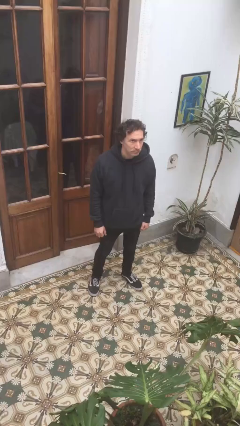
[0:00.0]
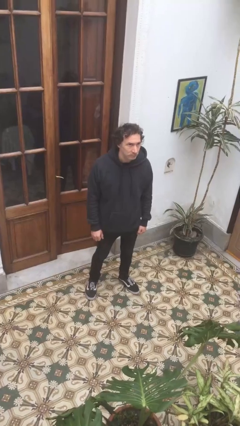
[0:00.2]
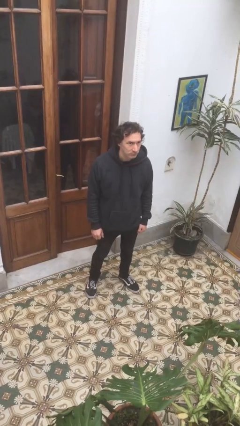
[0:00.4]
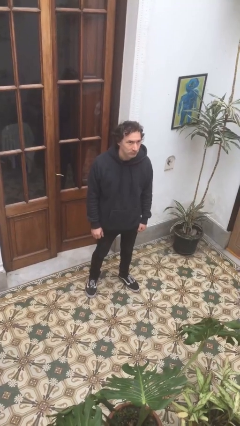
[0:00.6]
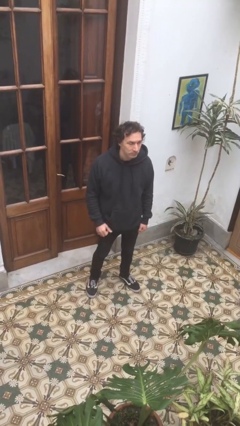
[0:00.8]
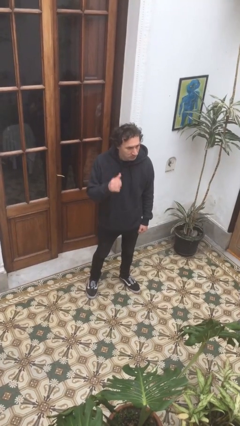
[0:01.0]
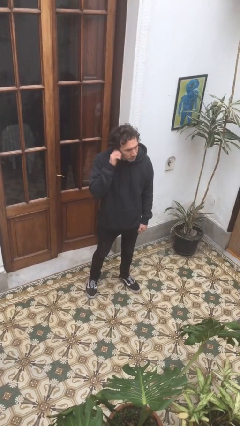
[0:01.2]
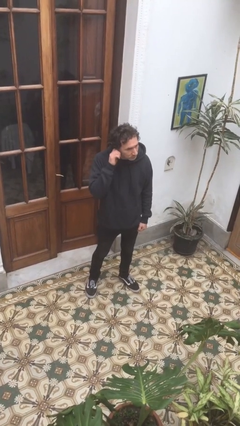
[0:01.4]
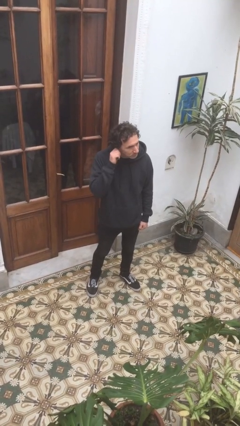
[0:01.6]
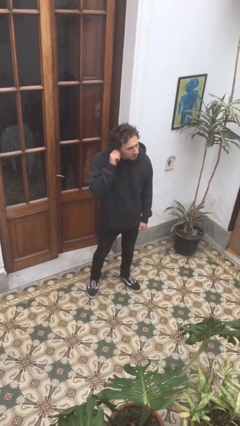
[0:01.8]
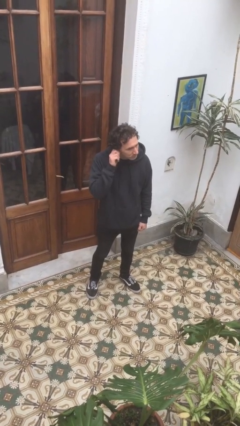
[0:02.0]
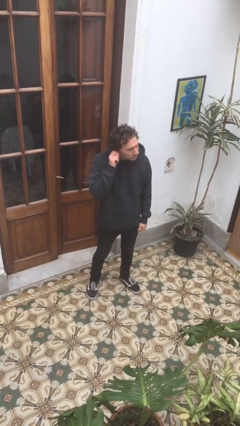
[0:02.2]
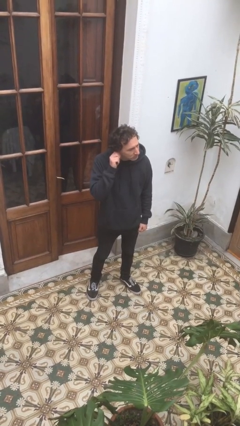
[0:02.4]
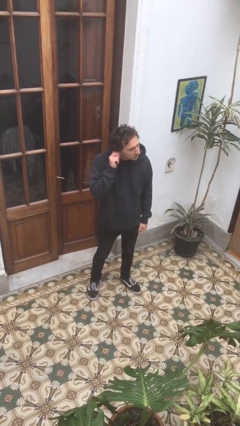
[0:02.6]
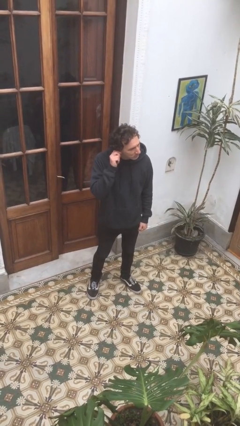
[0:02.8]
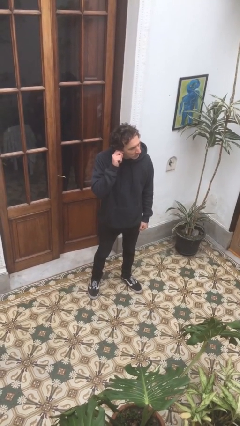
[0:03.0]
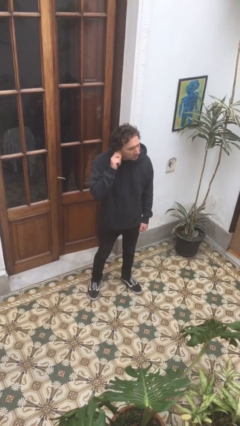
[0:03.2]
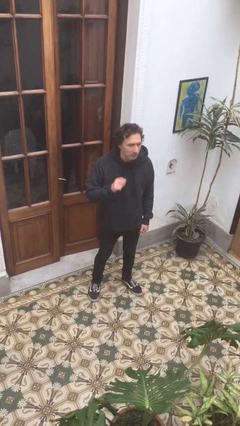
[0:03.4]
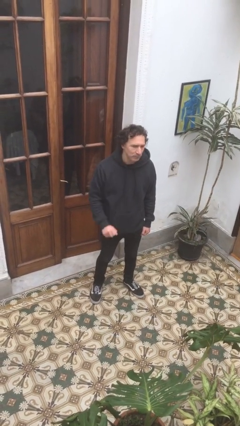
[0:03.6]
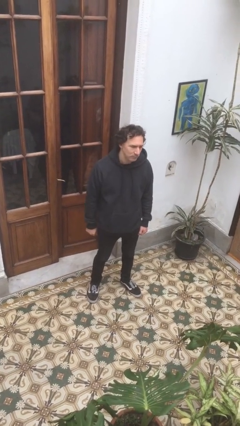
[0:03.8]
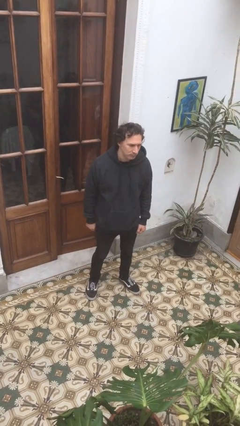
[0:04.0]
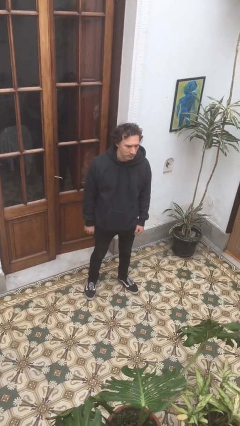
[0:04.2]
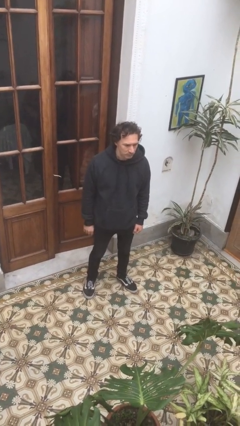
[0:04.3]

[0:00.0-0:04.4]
person touches earlobe

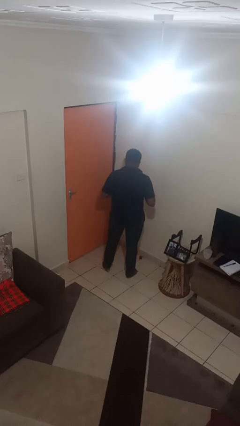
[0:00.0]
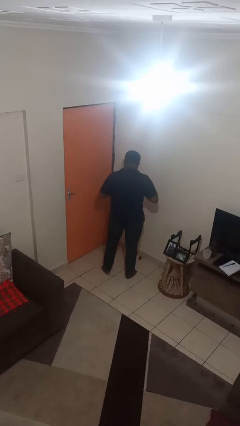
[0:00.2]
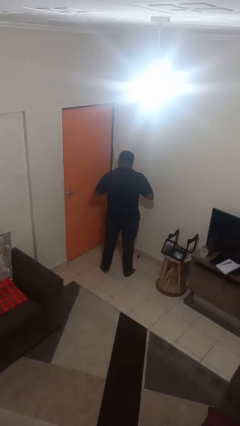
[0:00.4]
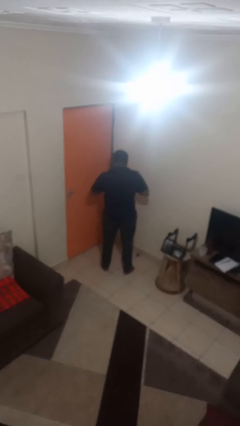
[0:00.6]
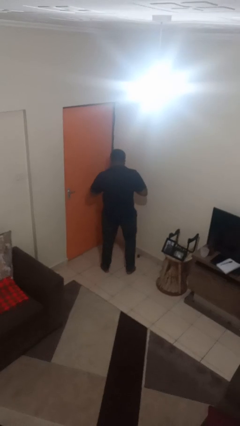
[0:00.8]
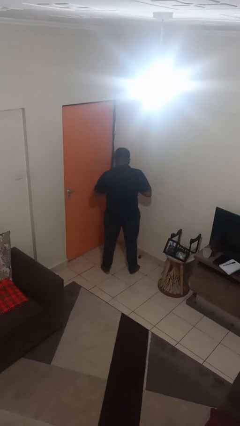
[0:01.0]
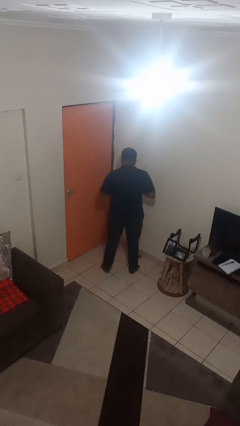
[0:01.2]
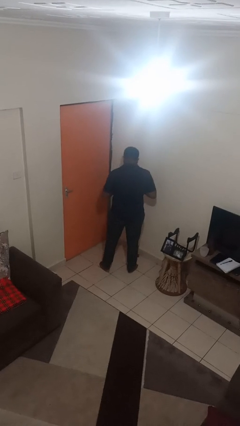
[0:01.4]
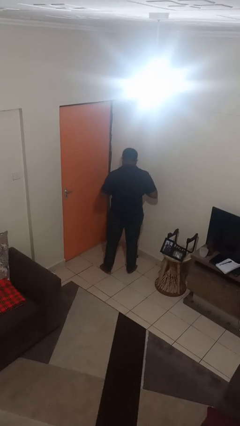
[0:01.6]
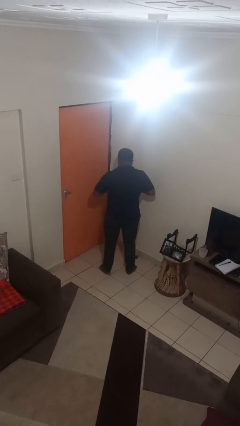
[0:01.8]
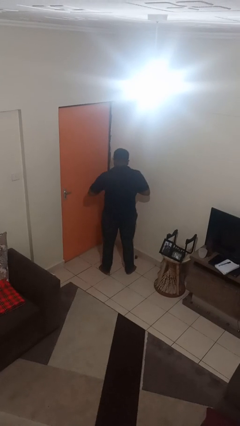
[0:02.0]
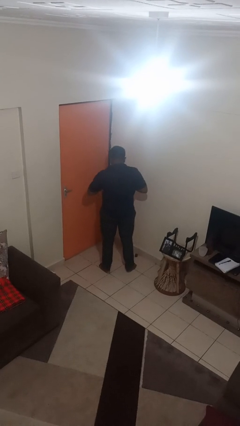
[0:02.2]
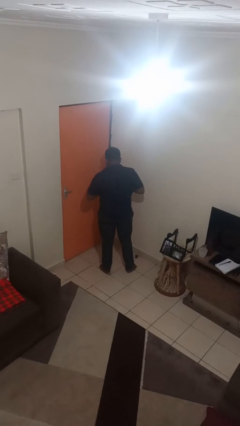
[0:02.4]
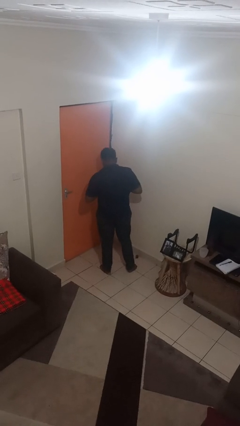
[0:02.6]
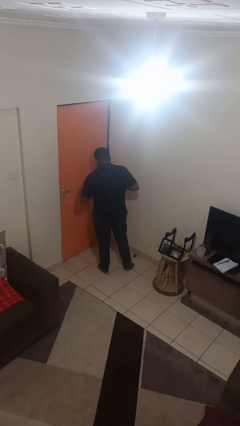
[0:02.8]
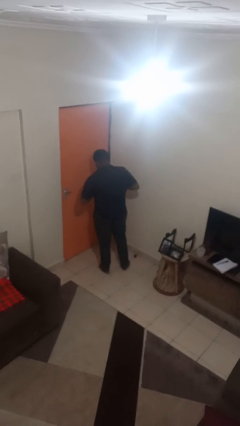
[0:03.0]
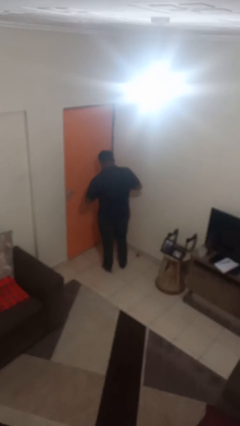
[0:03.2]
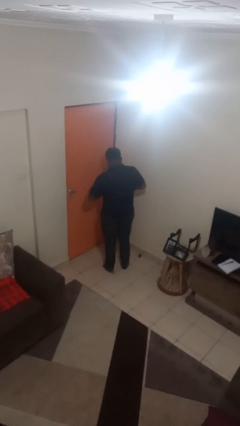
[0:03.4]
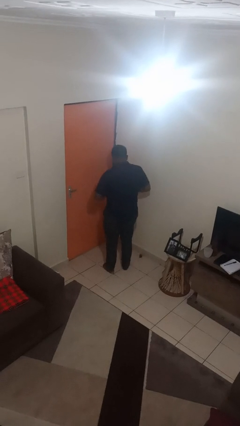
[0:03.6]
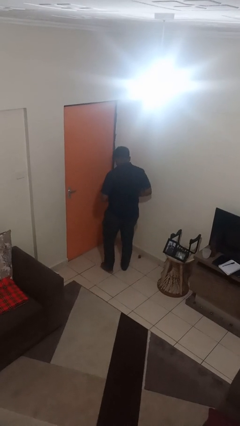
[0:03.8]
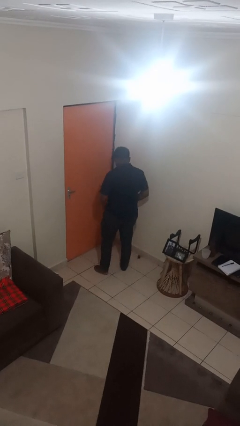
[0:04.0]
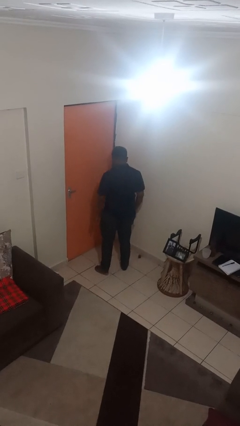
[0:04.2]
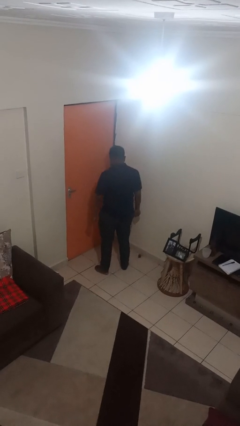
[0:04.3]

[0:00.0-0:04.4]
person unbuttons shirt

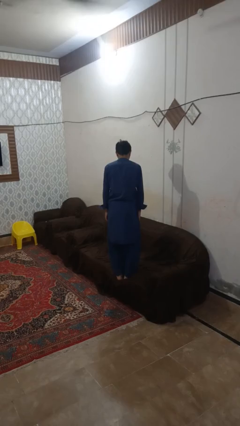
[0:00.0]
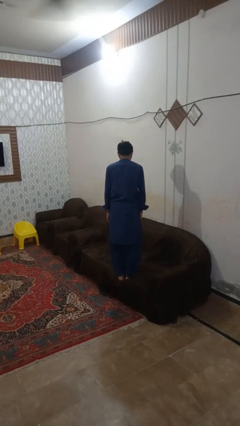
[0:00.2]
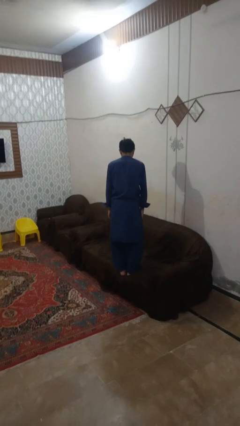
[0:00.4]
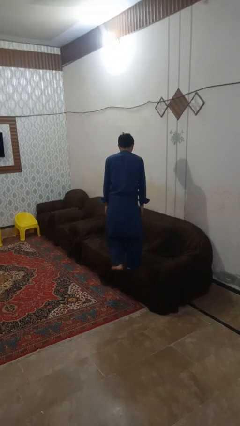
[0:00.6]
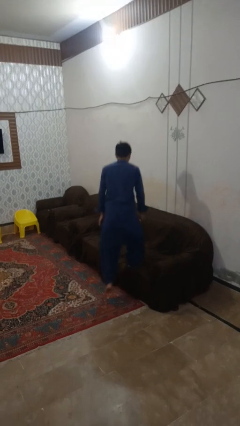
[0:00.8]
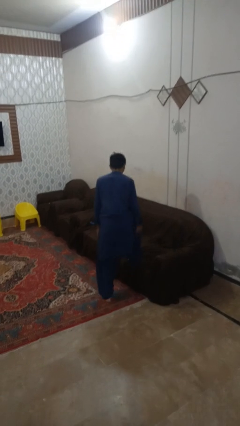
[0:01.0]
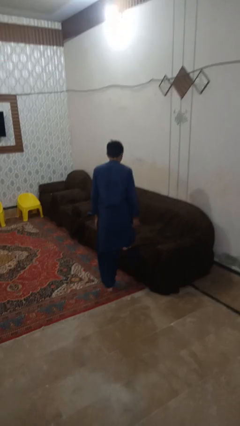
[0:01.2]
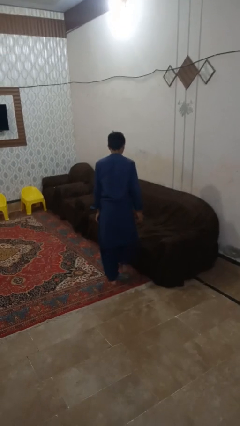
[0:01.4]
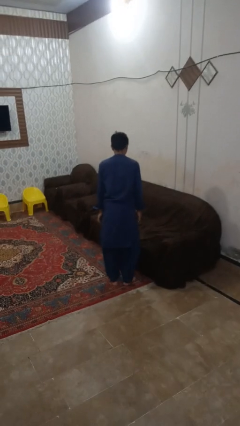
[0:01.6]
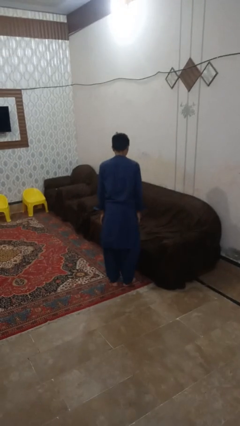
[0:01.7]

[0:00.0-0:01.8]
person climbs off couch

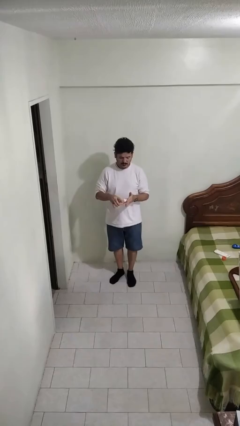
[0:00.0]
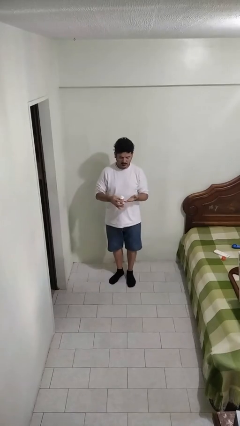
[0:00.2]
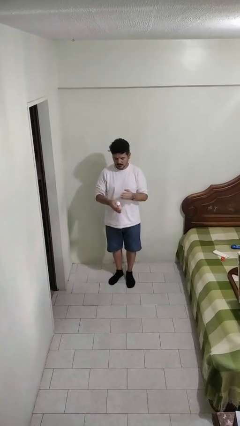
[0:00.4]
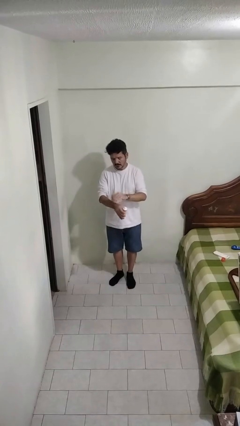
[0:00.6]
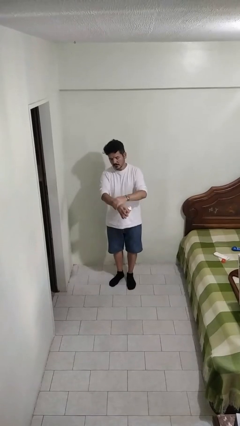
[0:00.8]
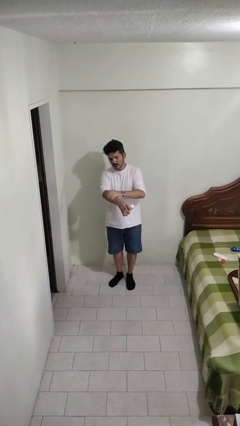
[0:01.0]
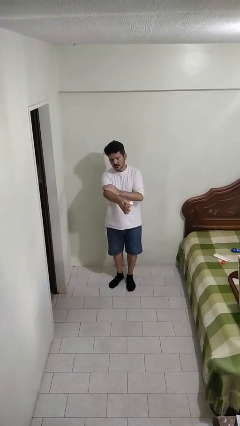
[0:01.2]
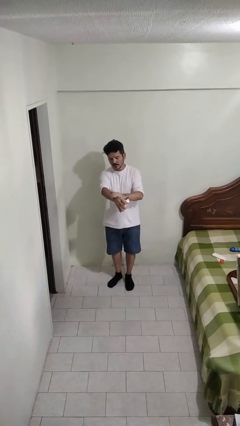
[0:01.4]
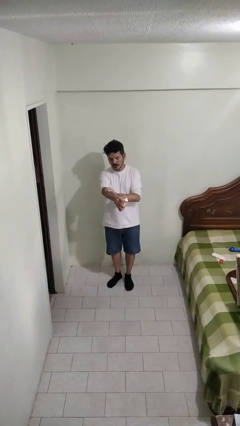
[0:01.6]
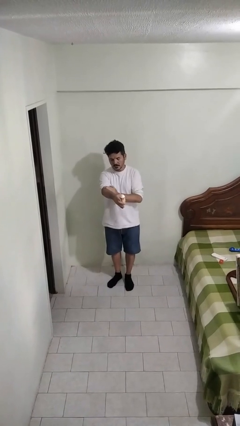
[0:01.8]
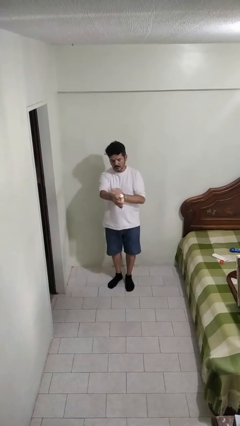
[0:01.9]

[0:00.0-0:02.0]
person applies sunscreen

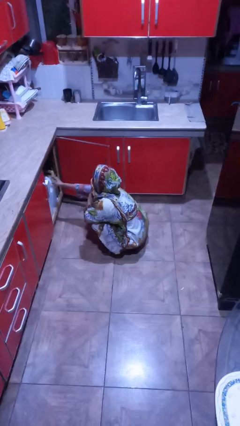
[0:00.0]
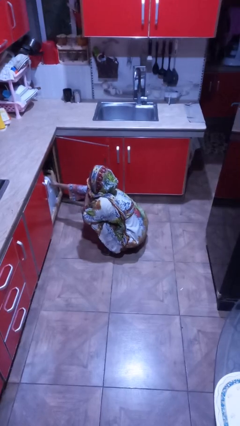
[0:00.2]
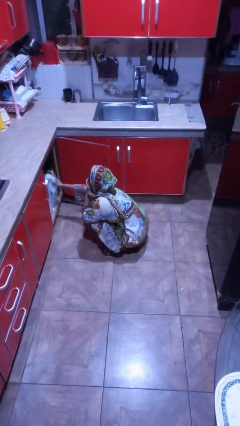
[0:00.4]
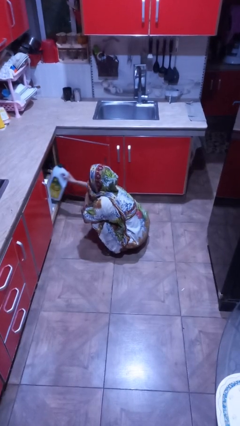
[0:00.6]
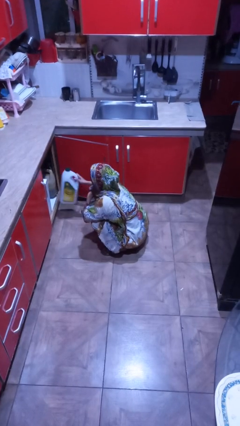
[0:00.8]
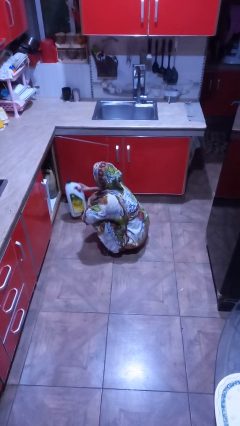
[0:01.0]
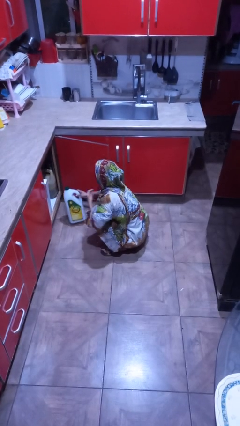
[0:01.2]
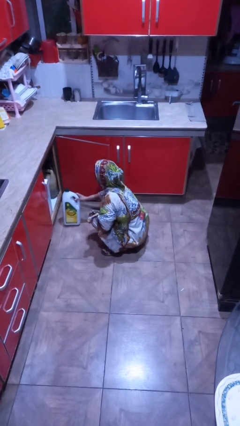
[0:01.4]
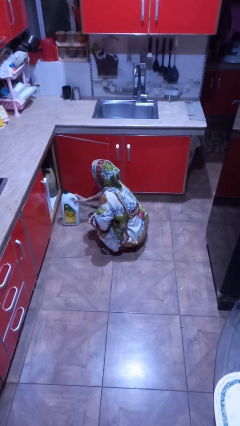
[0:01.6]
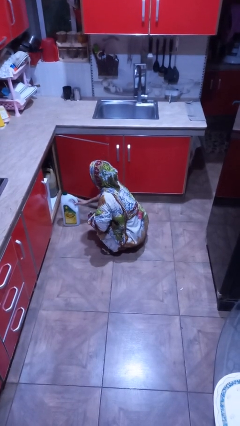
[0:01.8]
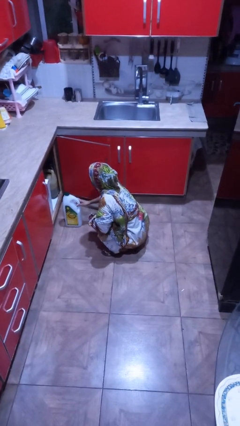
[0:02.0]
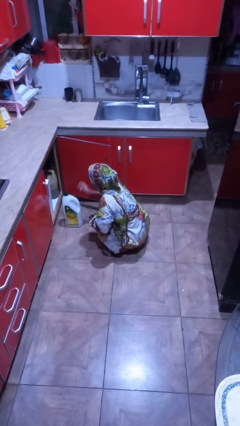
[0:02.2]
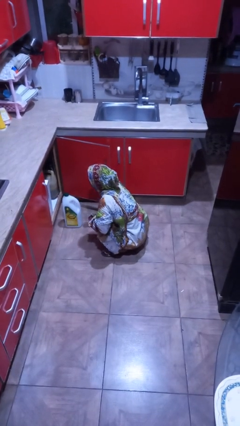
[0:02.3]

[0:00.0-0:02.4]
person takes object from cabinet

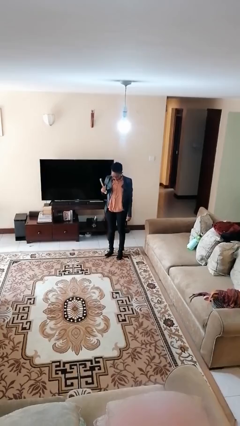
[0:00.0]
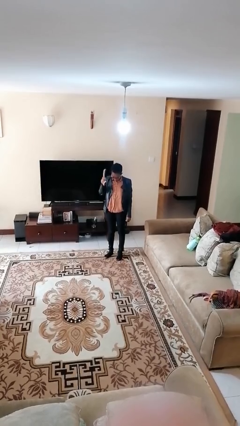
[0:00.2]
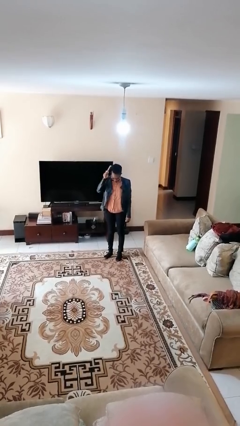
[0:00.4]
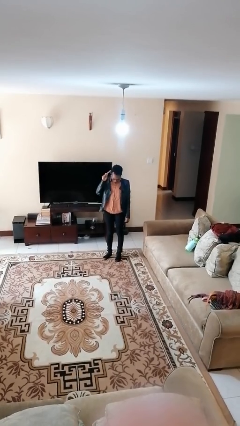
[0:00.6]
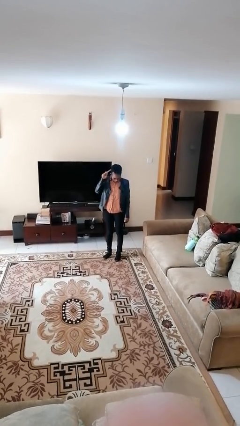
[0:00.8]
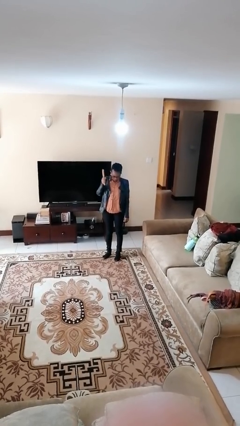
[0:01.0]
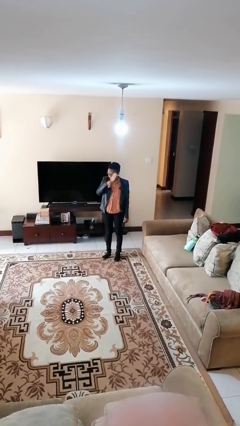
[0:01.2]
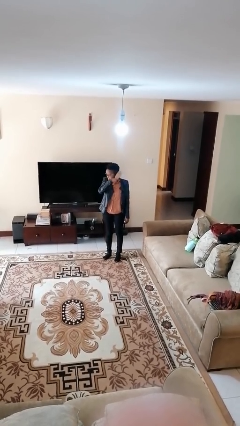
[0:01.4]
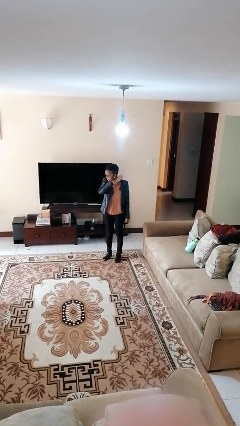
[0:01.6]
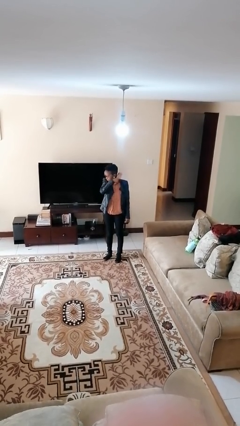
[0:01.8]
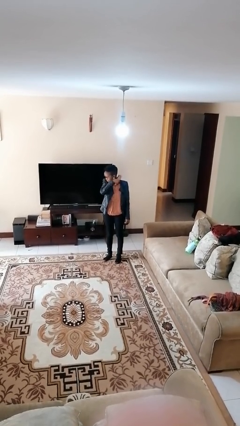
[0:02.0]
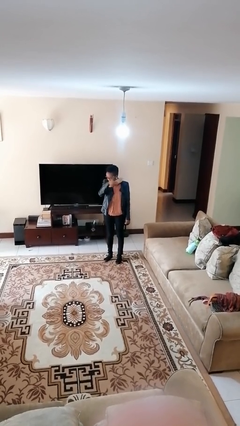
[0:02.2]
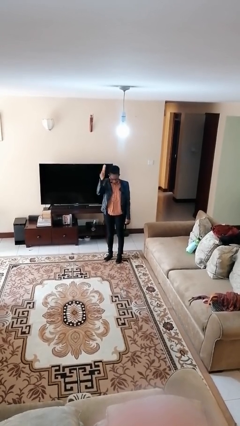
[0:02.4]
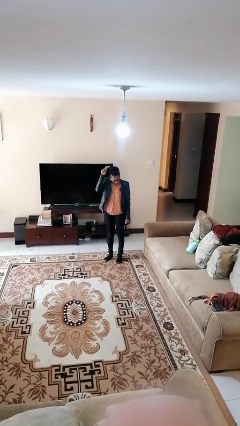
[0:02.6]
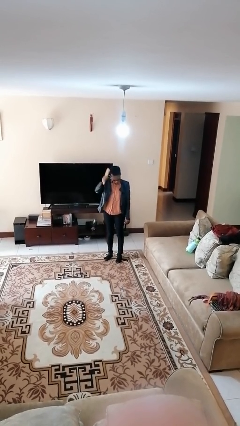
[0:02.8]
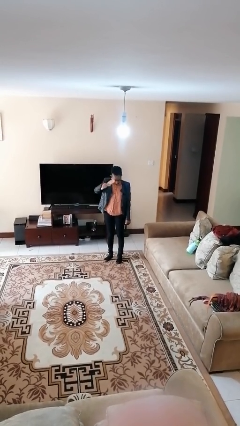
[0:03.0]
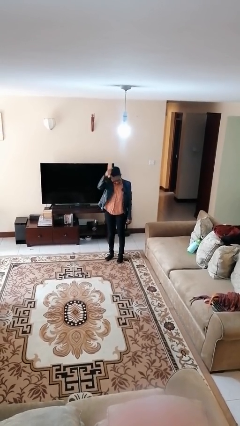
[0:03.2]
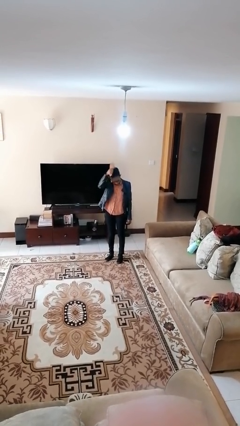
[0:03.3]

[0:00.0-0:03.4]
person brushes hair
